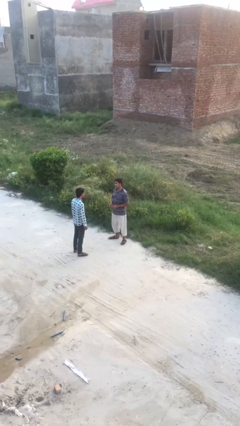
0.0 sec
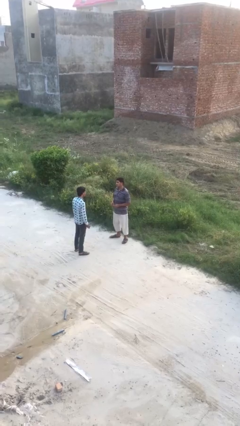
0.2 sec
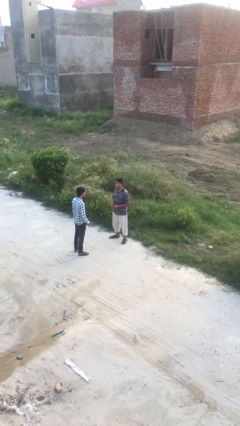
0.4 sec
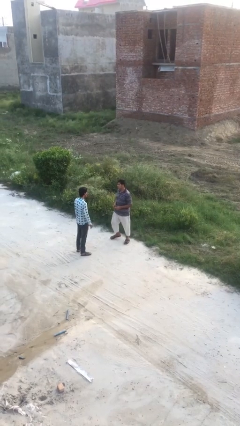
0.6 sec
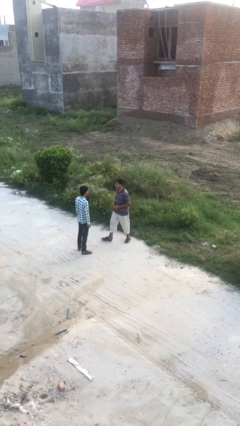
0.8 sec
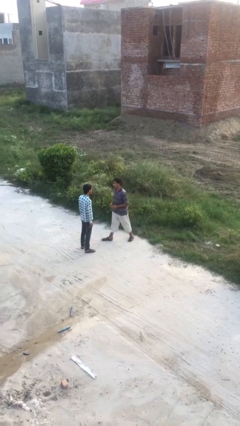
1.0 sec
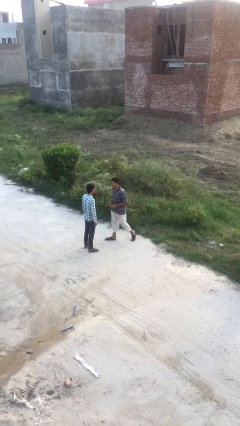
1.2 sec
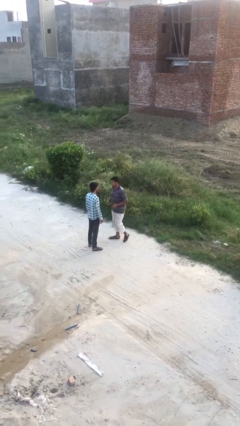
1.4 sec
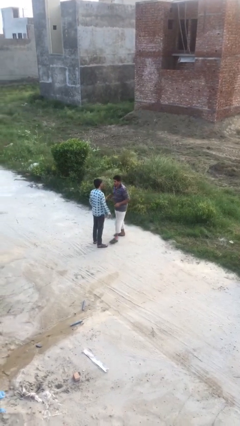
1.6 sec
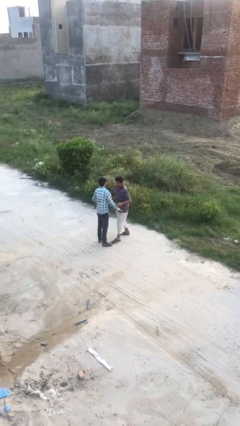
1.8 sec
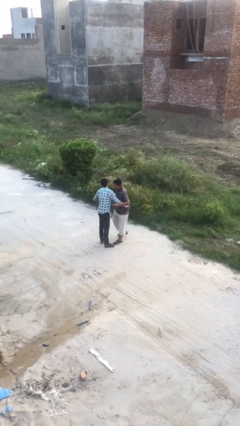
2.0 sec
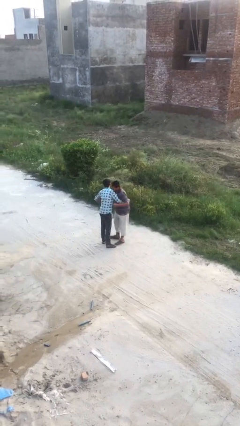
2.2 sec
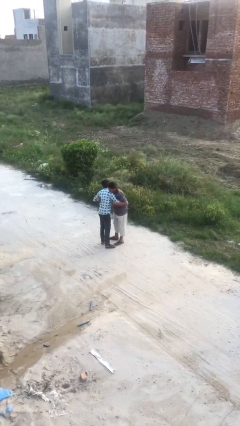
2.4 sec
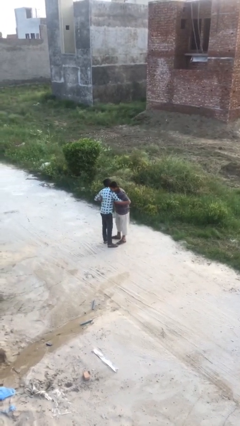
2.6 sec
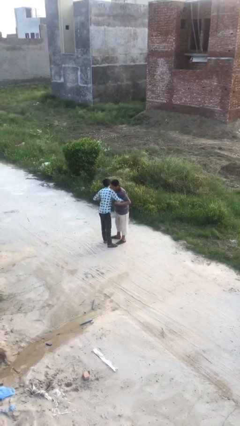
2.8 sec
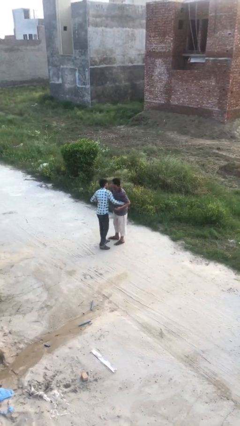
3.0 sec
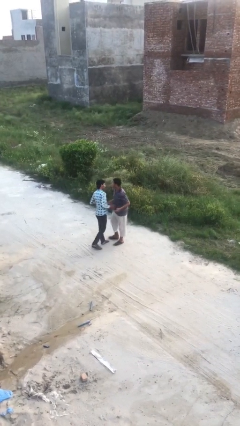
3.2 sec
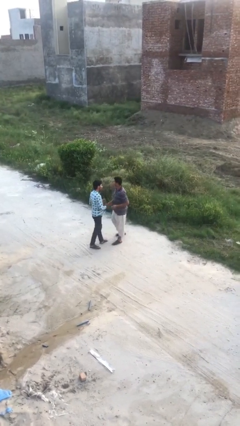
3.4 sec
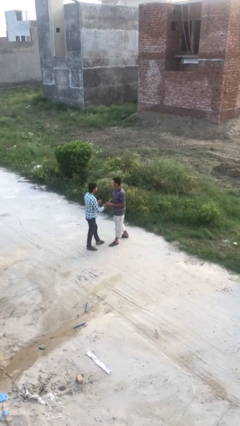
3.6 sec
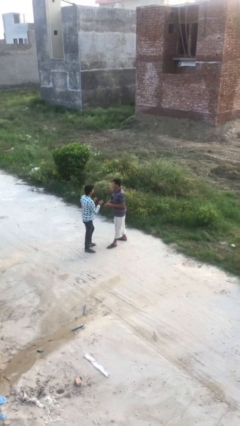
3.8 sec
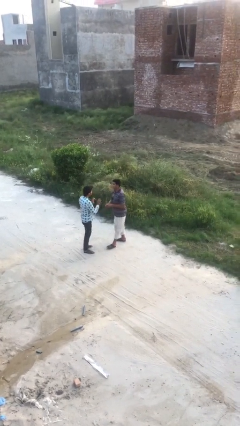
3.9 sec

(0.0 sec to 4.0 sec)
person embraces person

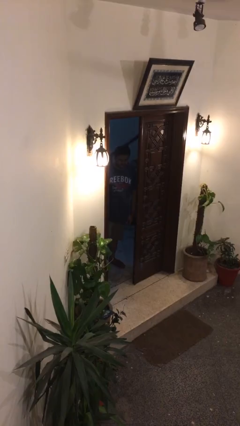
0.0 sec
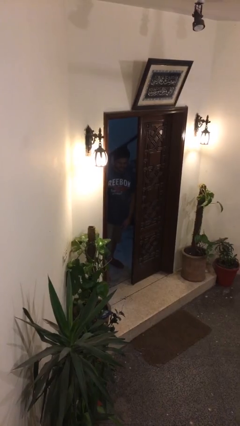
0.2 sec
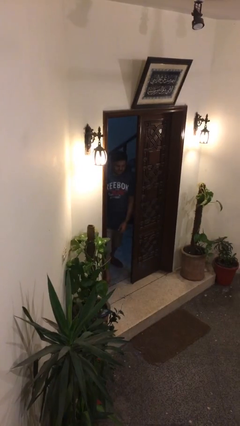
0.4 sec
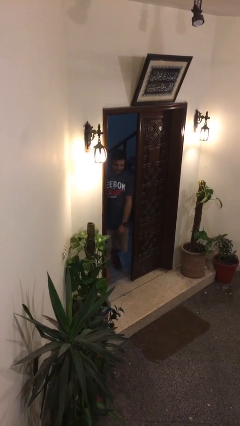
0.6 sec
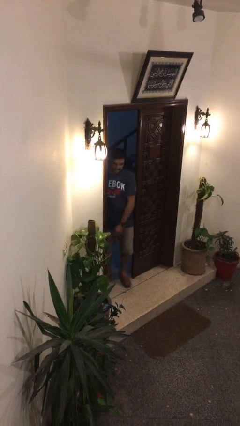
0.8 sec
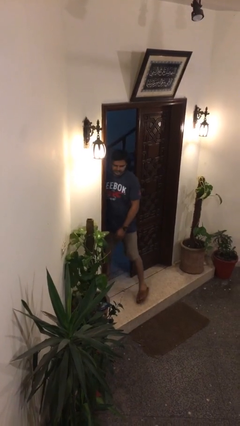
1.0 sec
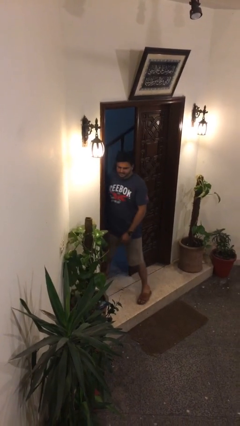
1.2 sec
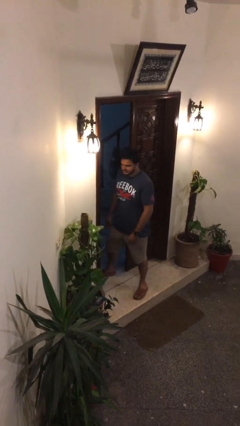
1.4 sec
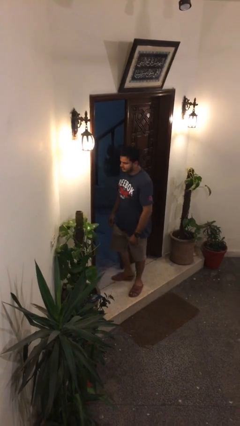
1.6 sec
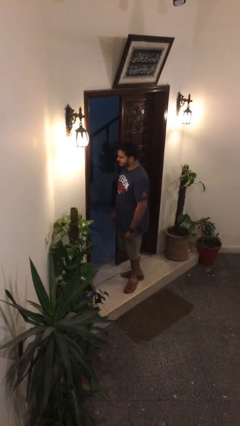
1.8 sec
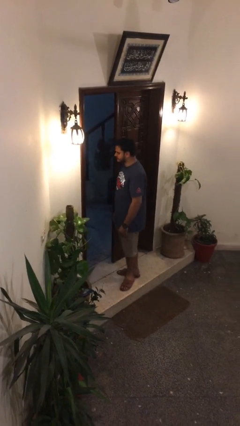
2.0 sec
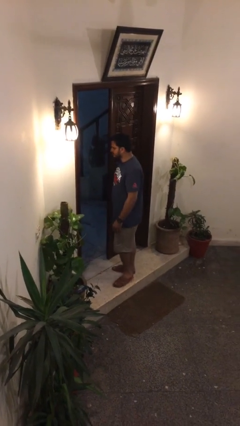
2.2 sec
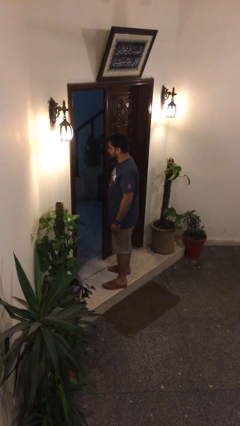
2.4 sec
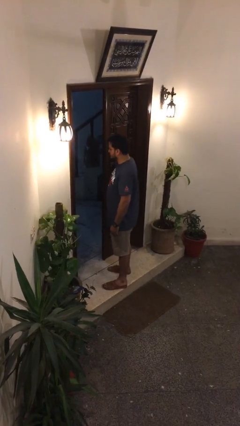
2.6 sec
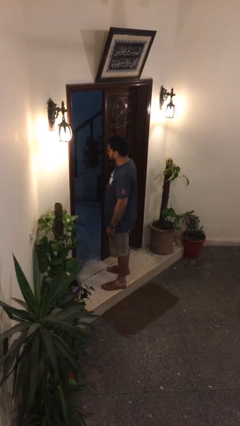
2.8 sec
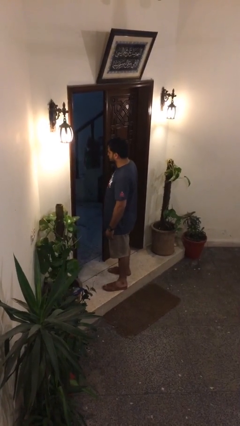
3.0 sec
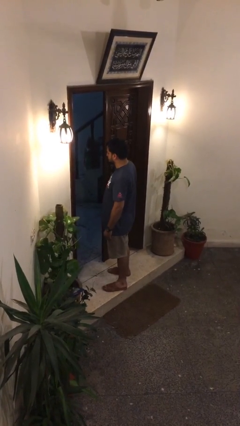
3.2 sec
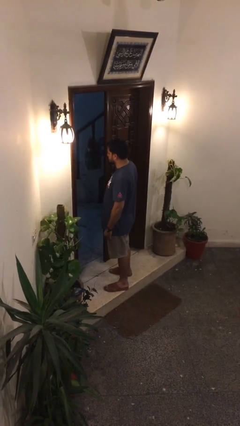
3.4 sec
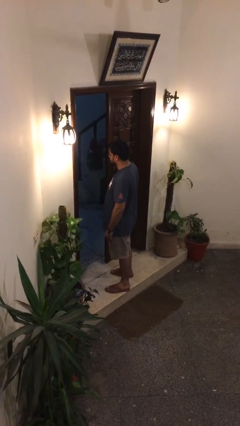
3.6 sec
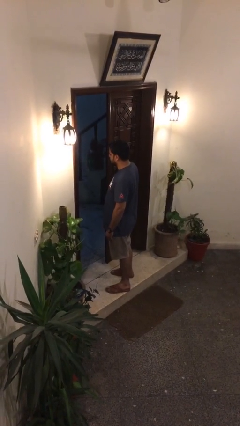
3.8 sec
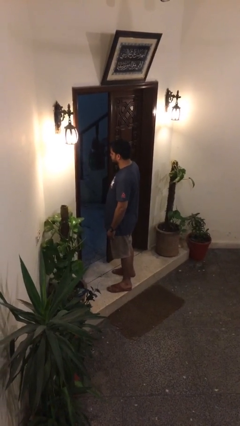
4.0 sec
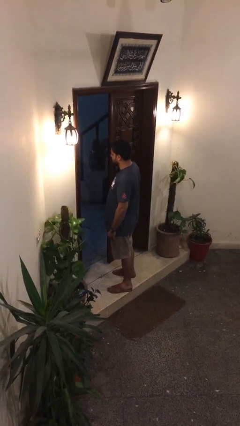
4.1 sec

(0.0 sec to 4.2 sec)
person enters scene through structure

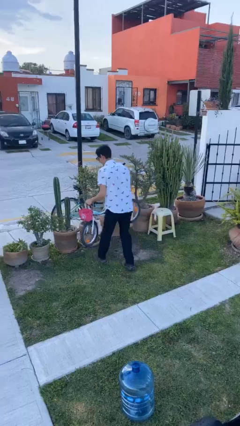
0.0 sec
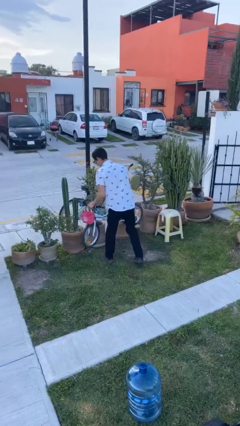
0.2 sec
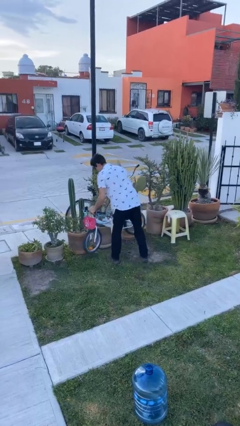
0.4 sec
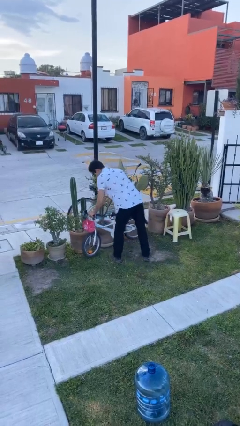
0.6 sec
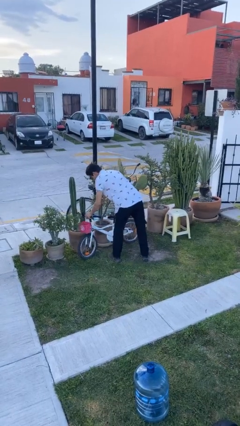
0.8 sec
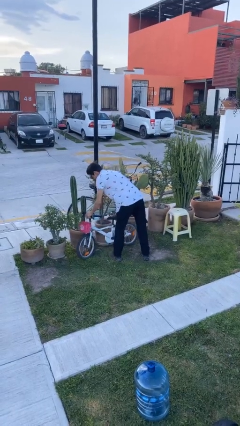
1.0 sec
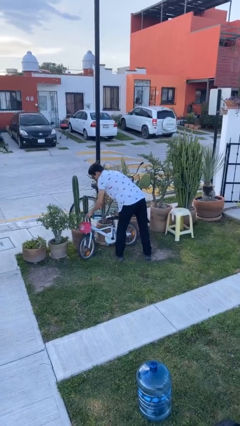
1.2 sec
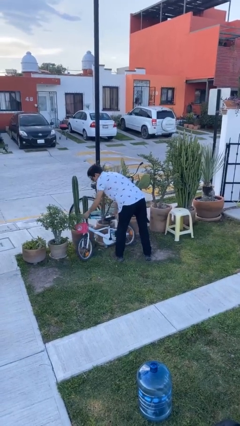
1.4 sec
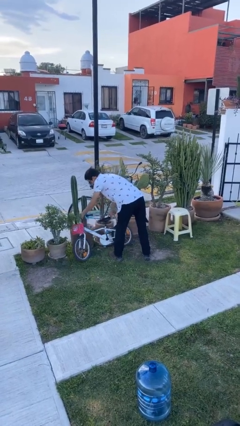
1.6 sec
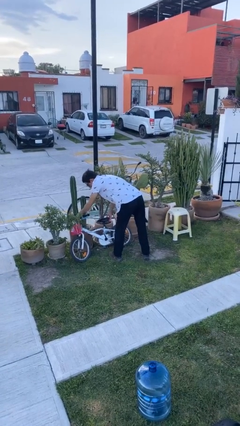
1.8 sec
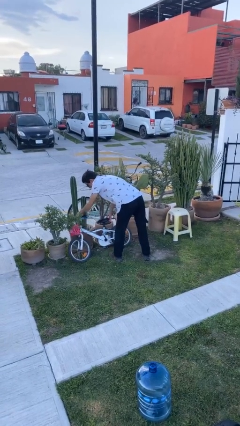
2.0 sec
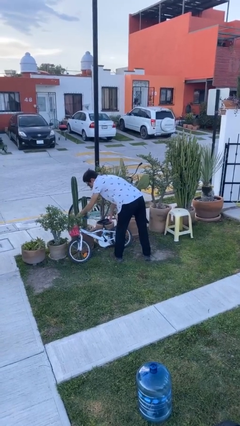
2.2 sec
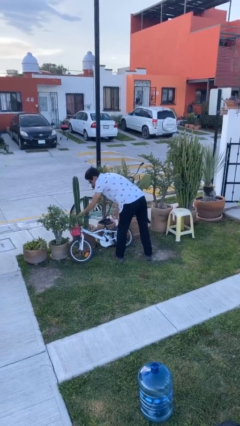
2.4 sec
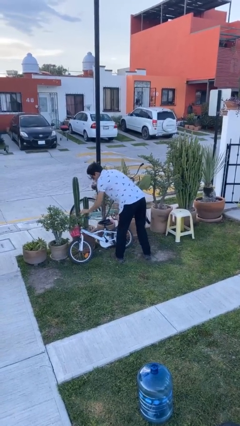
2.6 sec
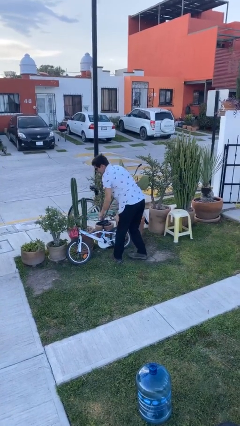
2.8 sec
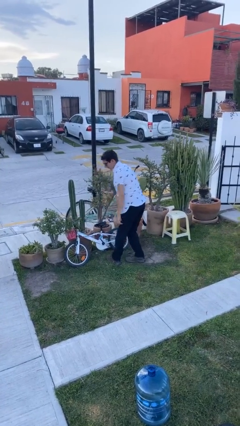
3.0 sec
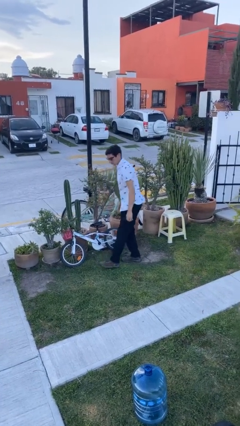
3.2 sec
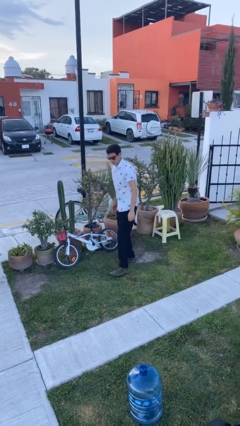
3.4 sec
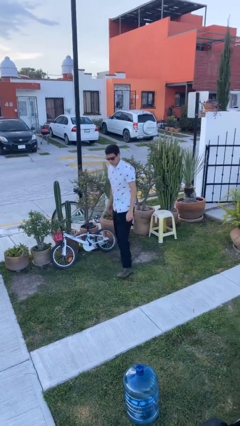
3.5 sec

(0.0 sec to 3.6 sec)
person puts down object on floor

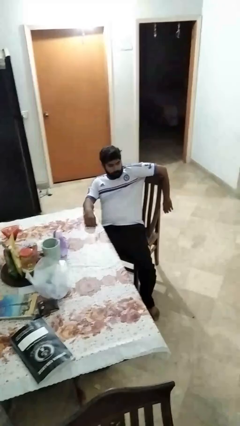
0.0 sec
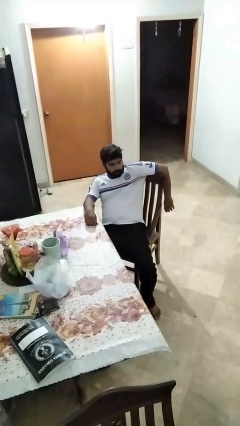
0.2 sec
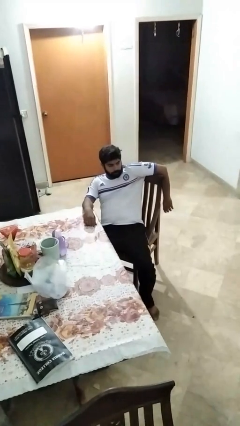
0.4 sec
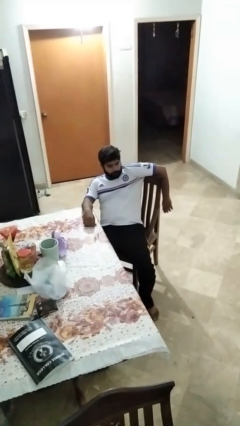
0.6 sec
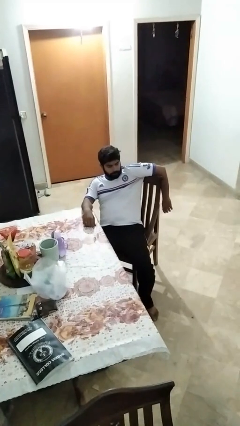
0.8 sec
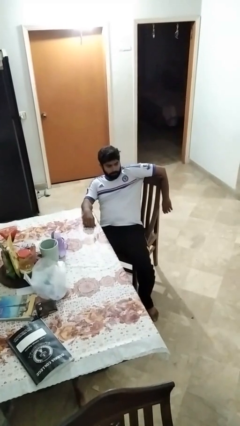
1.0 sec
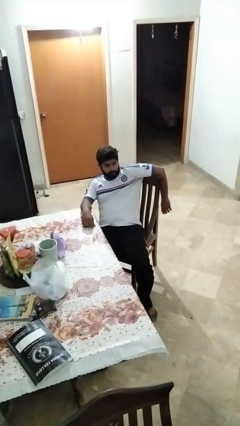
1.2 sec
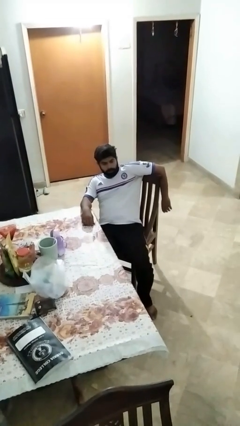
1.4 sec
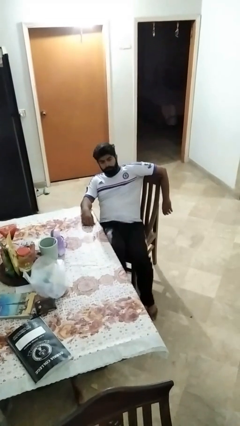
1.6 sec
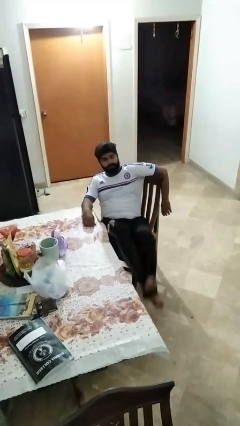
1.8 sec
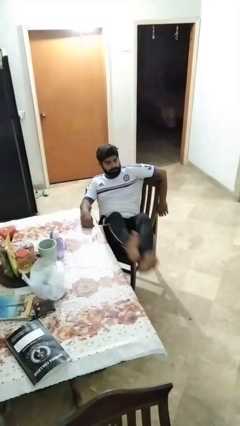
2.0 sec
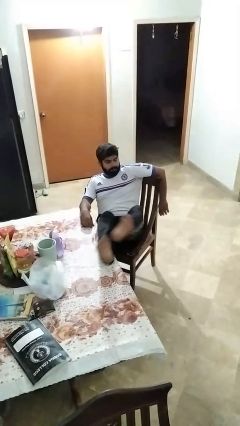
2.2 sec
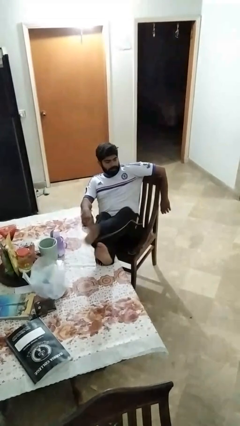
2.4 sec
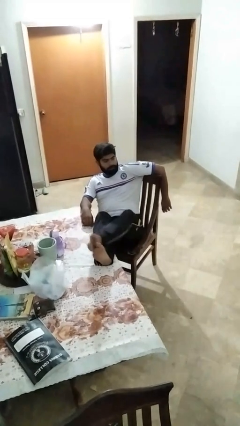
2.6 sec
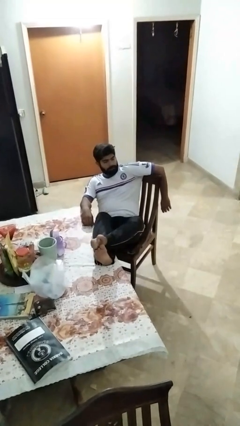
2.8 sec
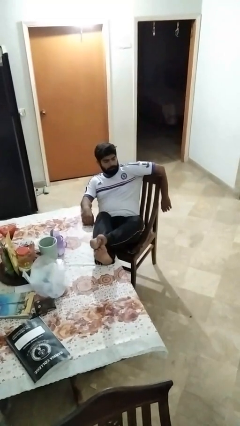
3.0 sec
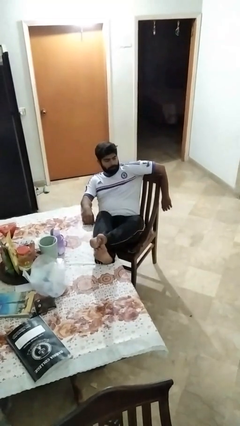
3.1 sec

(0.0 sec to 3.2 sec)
person puts feet up

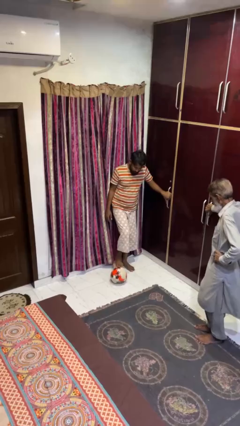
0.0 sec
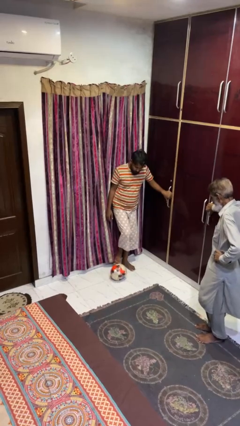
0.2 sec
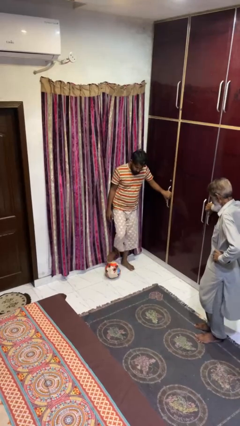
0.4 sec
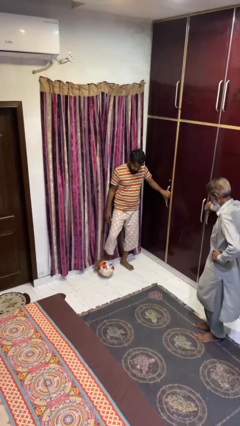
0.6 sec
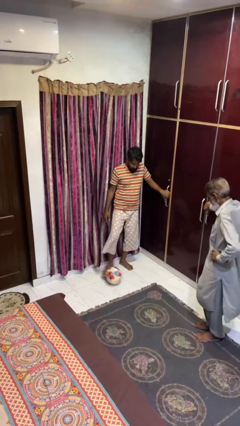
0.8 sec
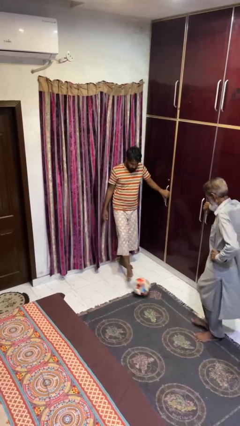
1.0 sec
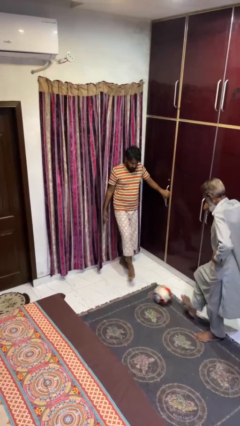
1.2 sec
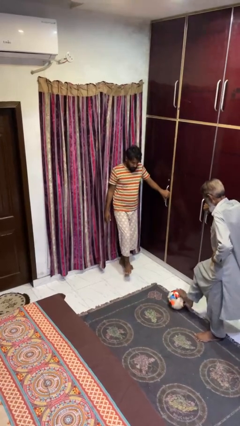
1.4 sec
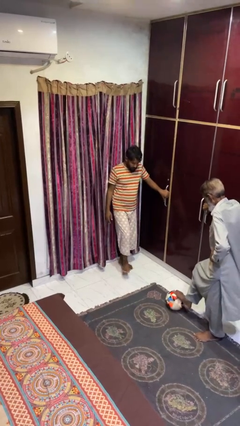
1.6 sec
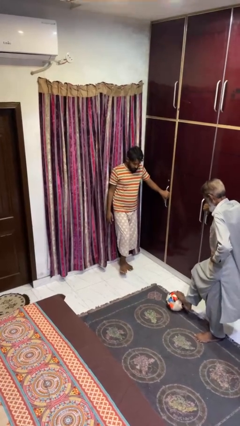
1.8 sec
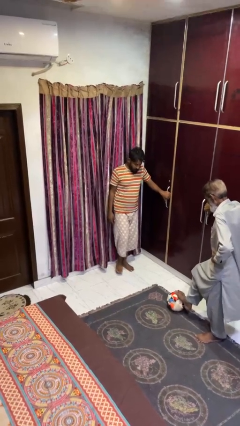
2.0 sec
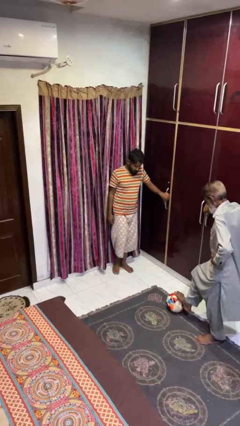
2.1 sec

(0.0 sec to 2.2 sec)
person kicks object to person

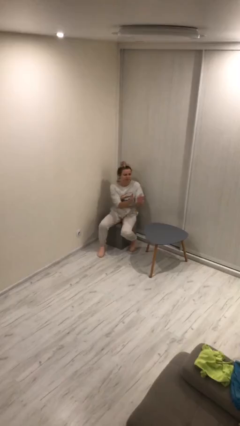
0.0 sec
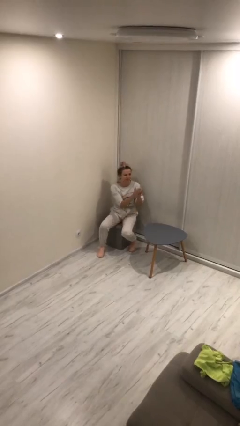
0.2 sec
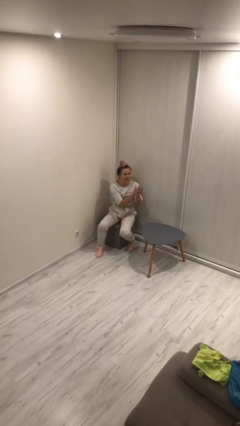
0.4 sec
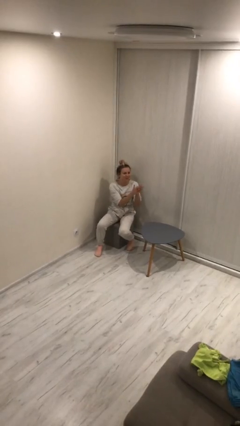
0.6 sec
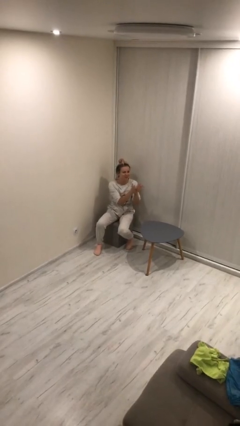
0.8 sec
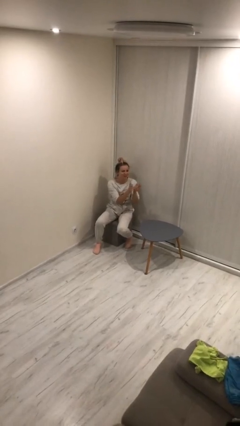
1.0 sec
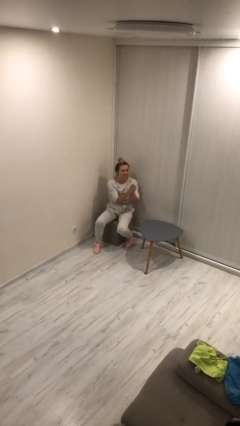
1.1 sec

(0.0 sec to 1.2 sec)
person claps hands
